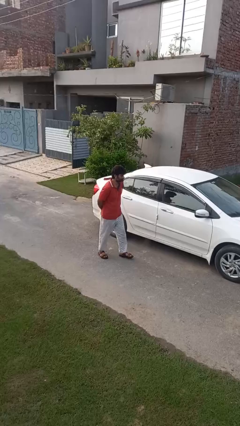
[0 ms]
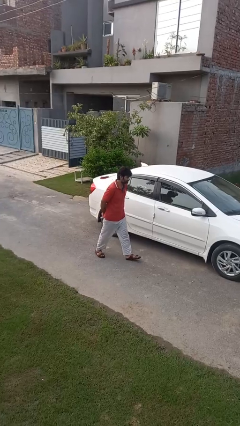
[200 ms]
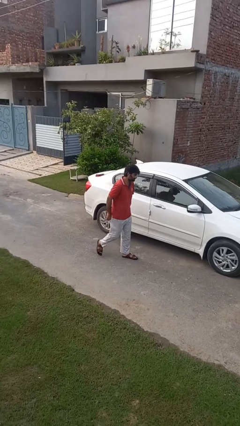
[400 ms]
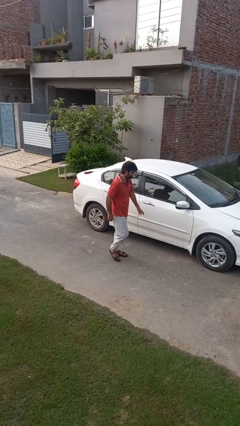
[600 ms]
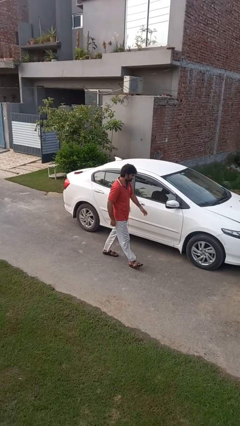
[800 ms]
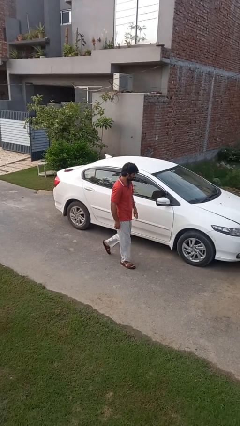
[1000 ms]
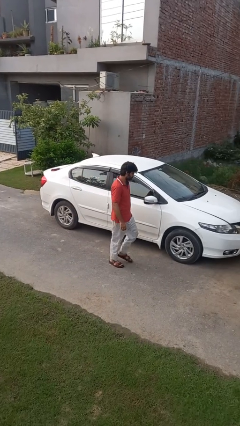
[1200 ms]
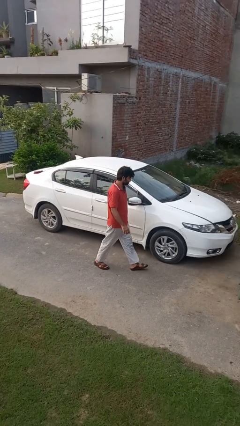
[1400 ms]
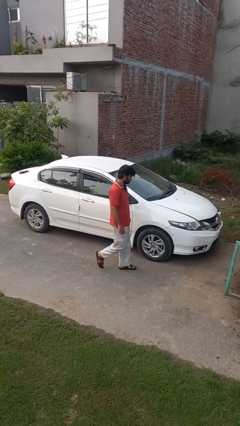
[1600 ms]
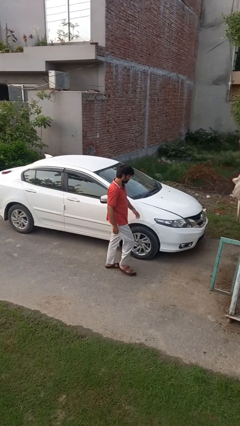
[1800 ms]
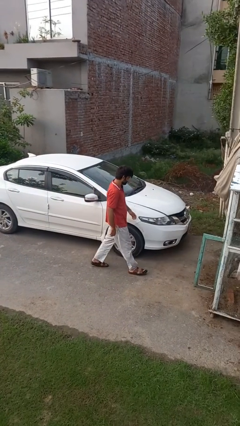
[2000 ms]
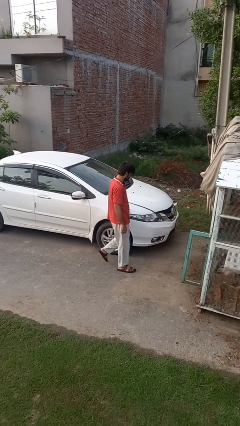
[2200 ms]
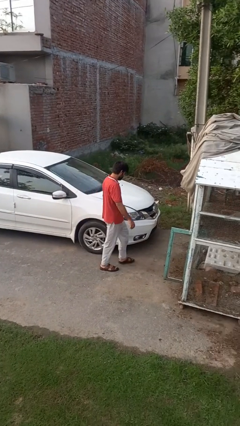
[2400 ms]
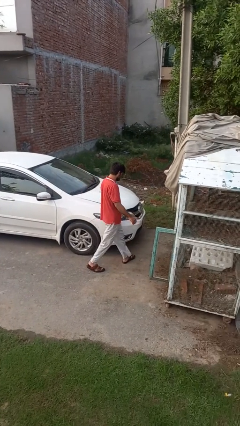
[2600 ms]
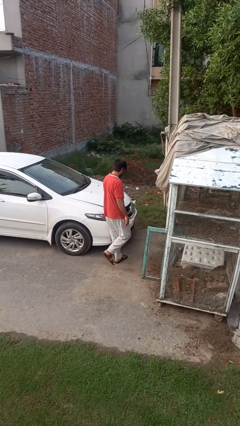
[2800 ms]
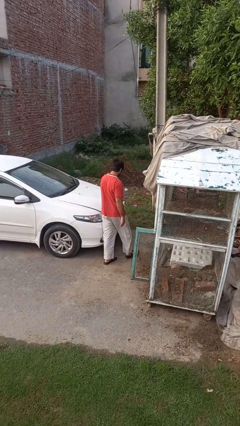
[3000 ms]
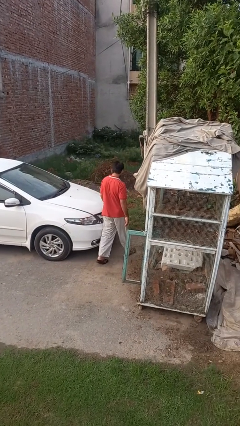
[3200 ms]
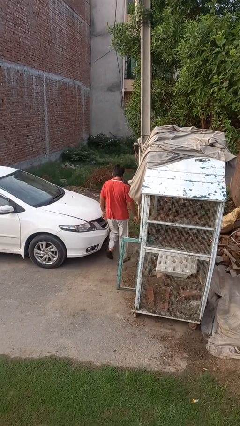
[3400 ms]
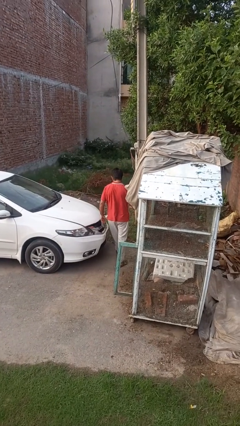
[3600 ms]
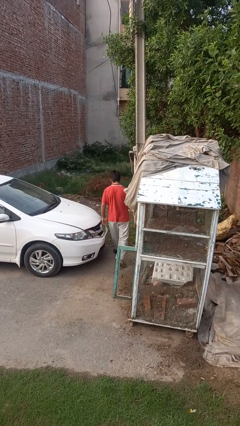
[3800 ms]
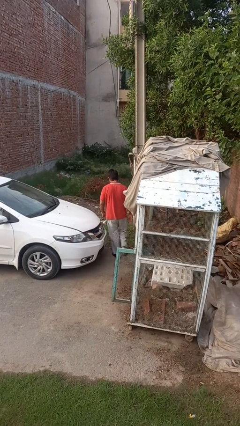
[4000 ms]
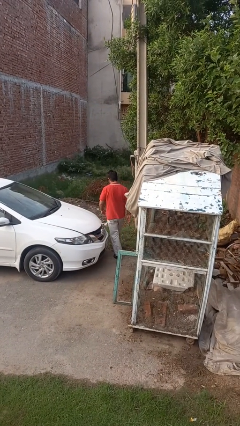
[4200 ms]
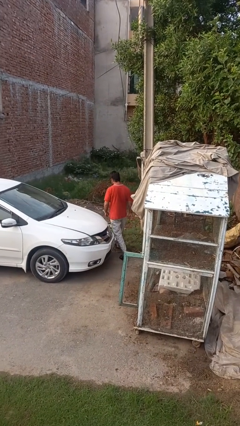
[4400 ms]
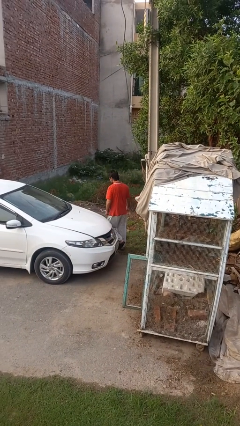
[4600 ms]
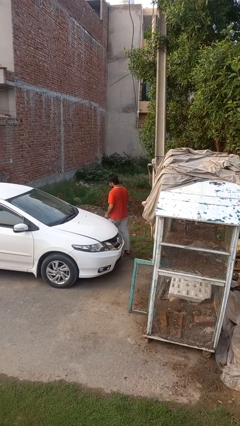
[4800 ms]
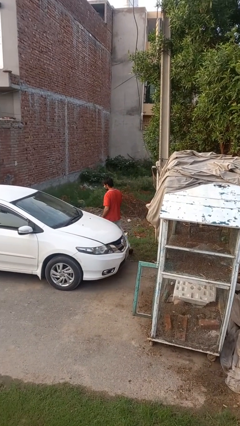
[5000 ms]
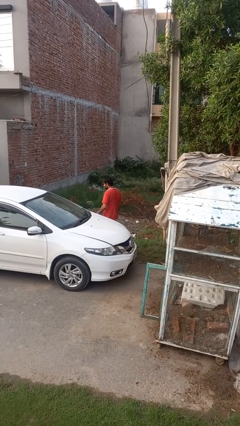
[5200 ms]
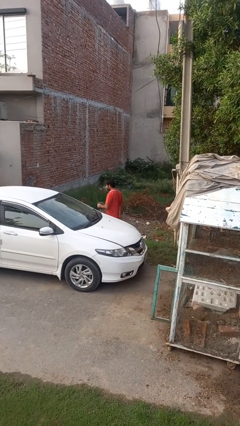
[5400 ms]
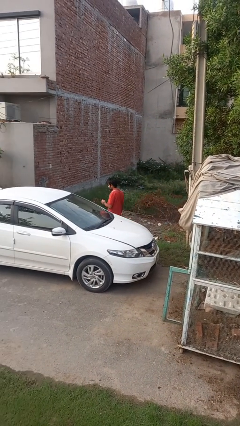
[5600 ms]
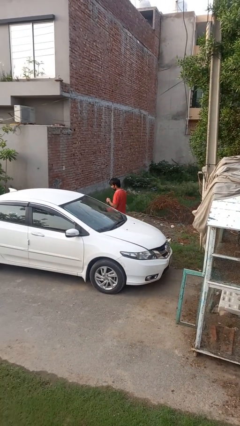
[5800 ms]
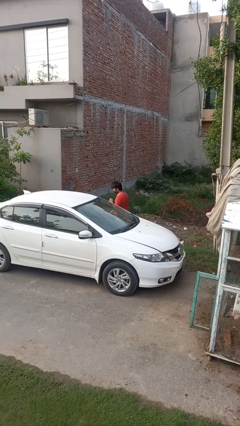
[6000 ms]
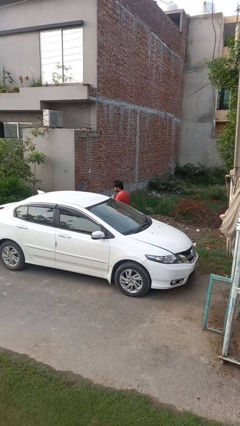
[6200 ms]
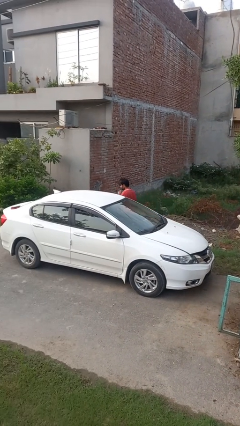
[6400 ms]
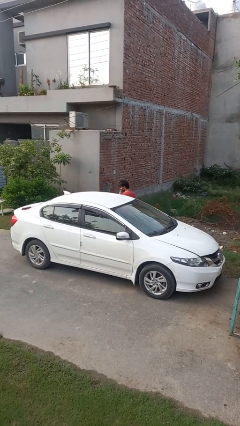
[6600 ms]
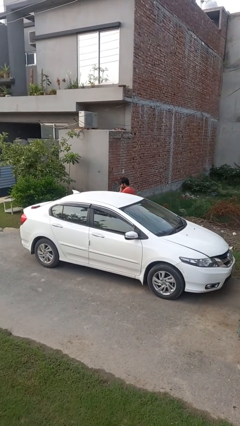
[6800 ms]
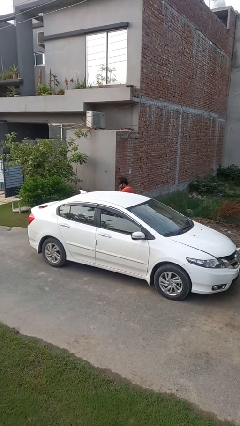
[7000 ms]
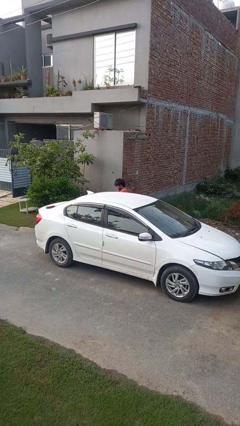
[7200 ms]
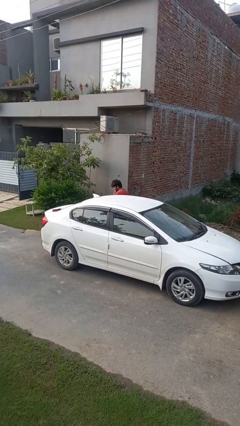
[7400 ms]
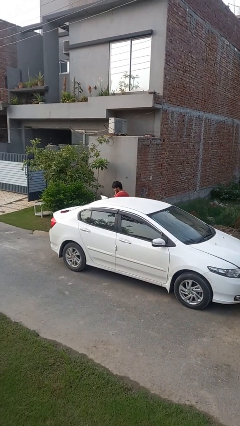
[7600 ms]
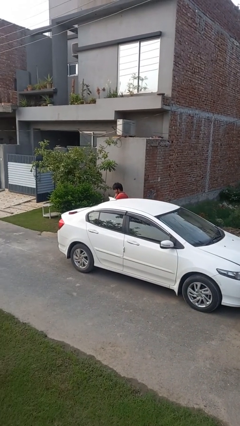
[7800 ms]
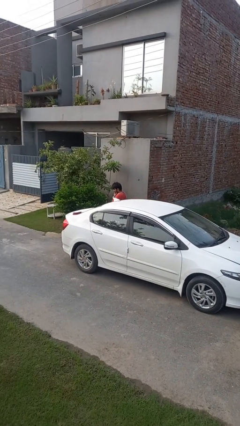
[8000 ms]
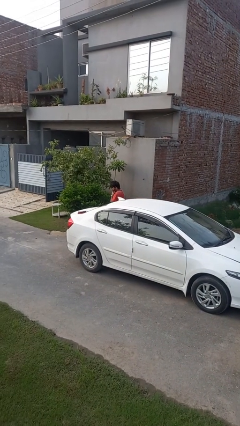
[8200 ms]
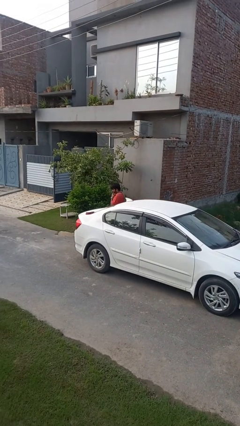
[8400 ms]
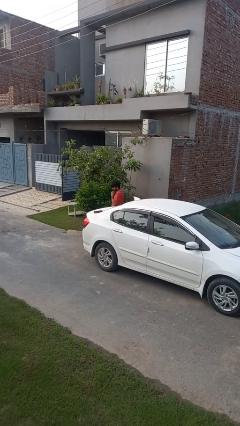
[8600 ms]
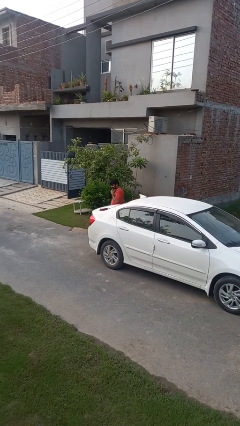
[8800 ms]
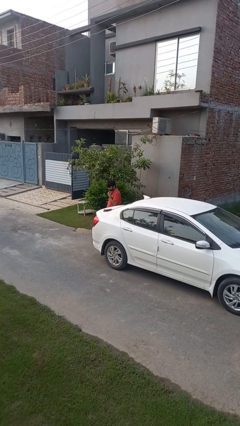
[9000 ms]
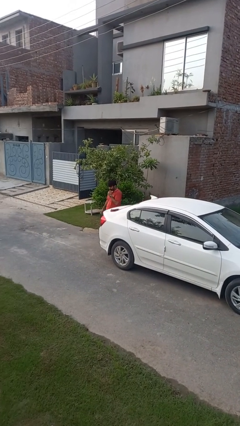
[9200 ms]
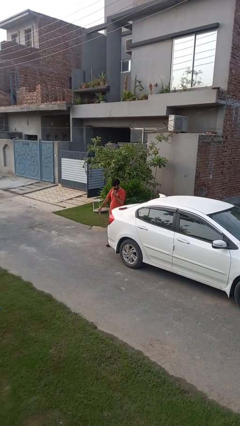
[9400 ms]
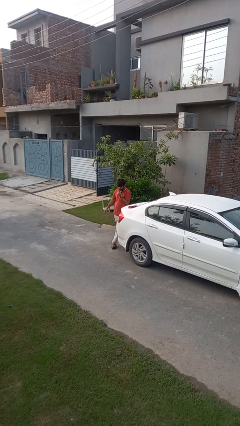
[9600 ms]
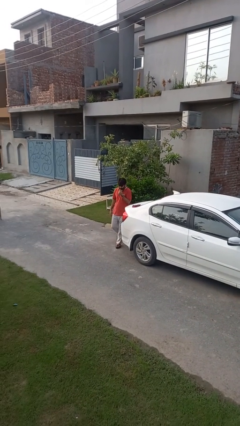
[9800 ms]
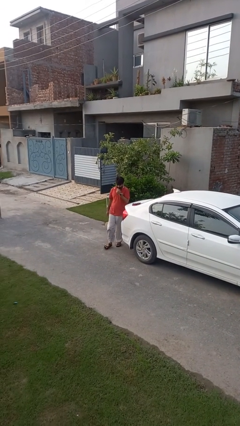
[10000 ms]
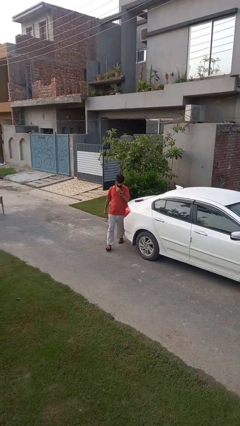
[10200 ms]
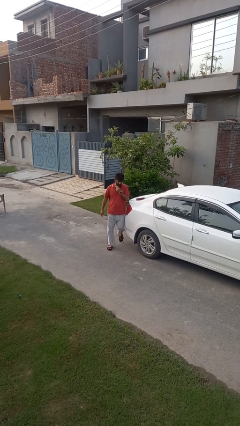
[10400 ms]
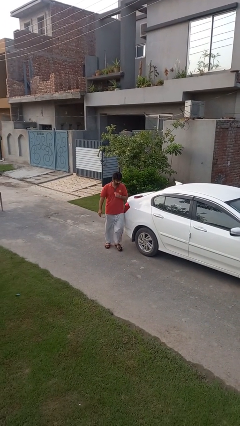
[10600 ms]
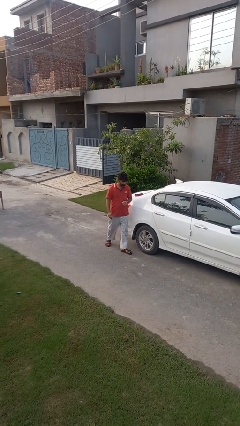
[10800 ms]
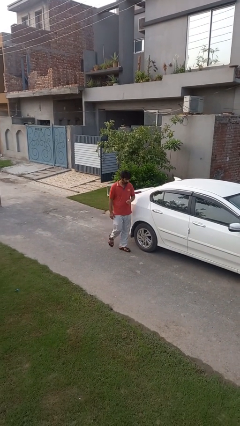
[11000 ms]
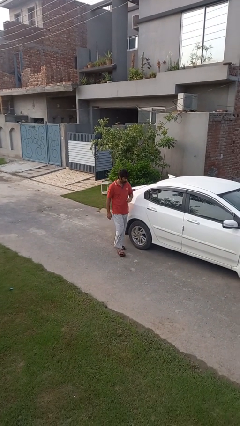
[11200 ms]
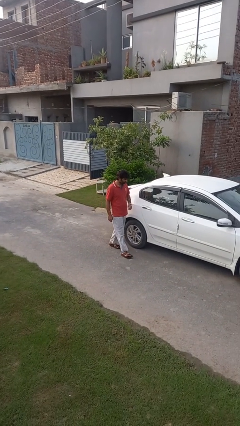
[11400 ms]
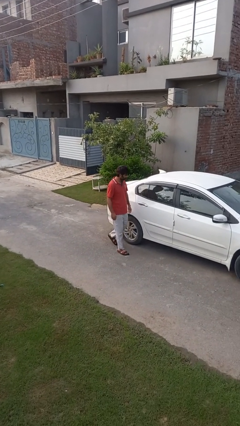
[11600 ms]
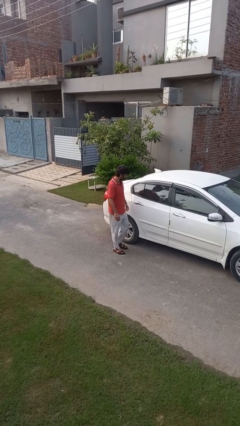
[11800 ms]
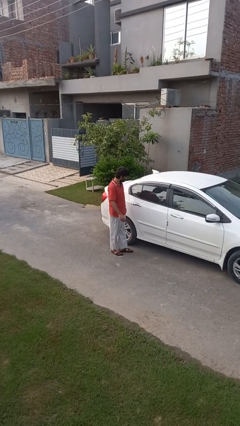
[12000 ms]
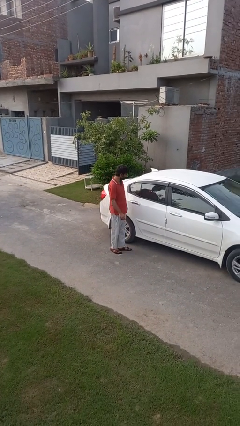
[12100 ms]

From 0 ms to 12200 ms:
person walks around car

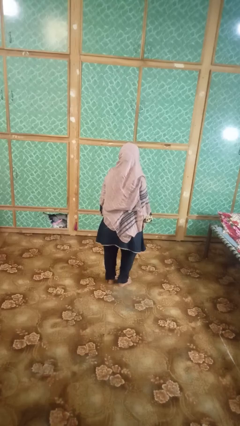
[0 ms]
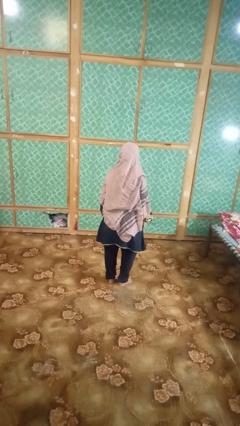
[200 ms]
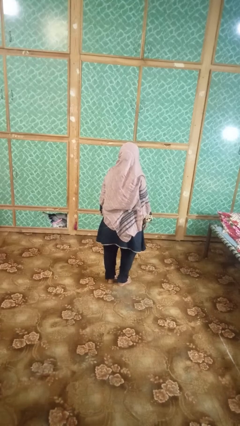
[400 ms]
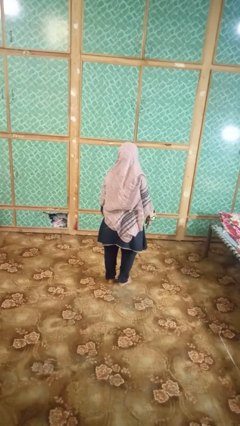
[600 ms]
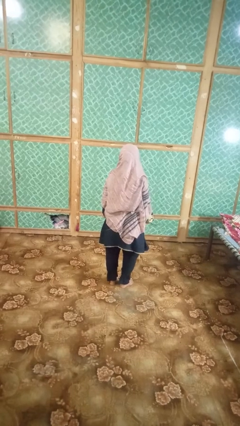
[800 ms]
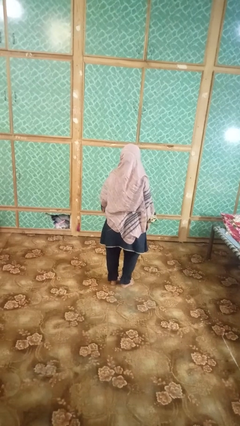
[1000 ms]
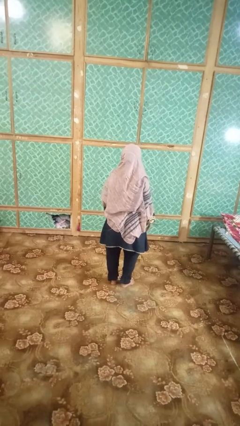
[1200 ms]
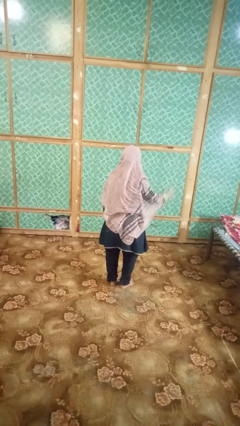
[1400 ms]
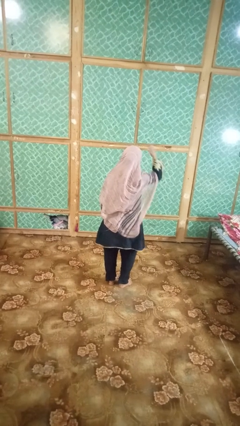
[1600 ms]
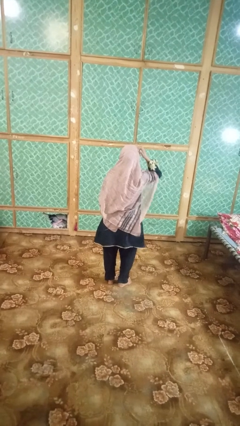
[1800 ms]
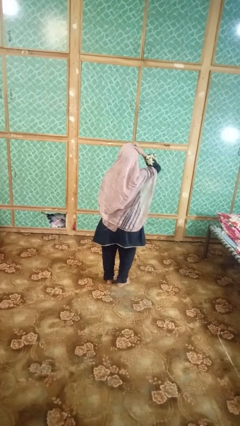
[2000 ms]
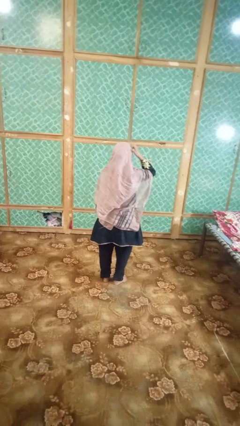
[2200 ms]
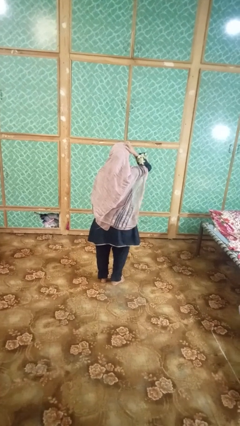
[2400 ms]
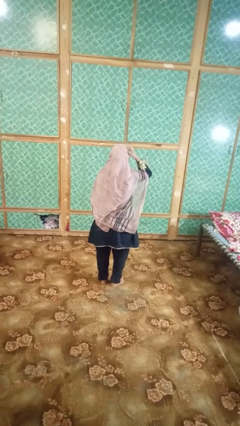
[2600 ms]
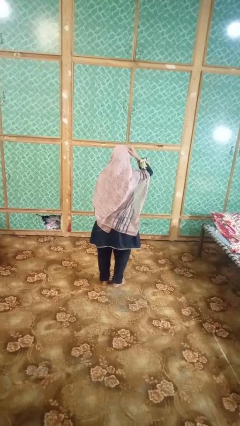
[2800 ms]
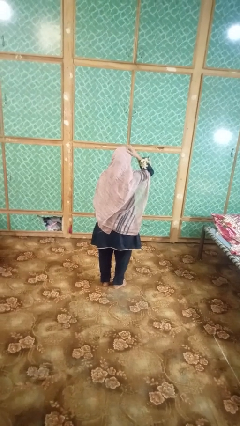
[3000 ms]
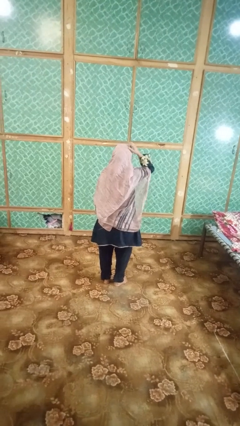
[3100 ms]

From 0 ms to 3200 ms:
person strokes hair

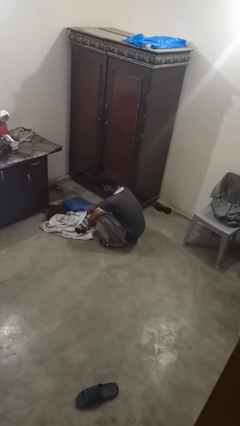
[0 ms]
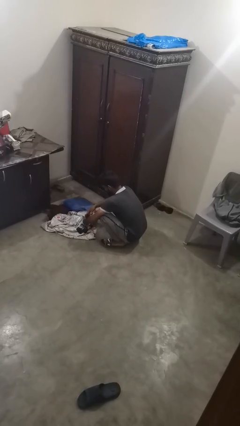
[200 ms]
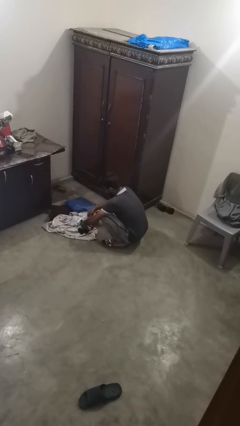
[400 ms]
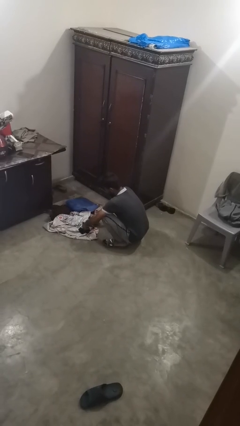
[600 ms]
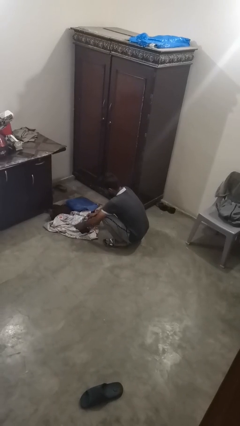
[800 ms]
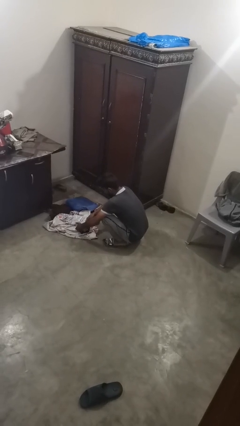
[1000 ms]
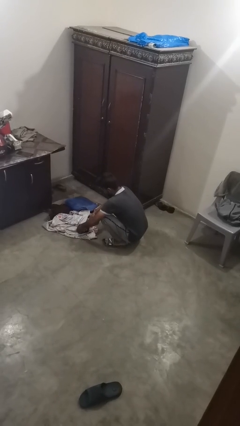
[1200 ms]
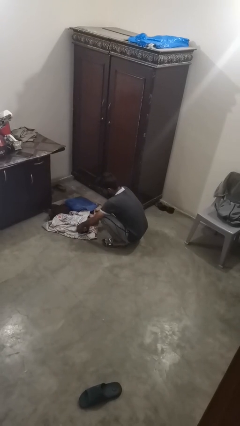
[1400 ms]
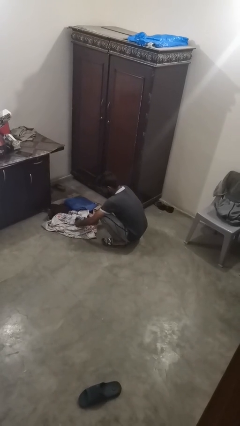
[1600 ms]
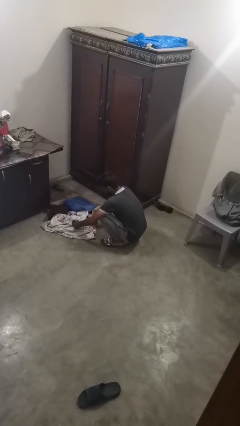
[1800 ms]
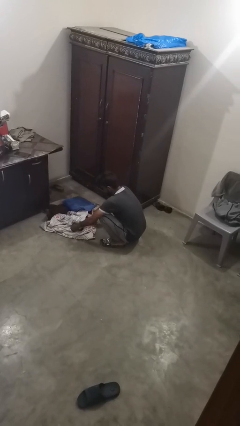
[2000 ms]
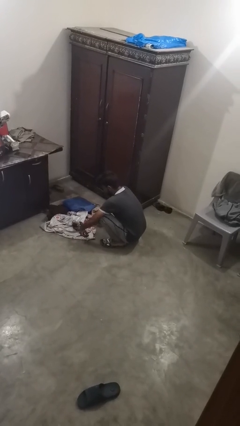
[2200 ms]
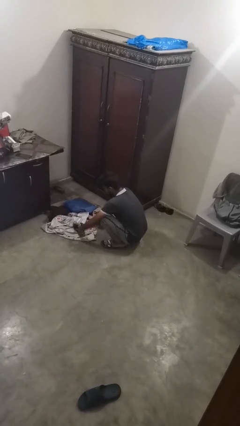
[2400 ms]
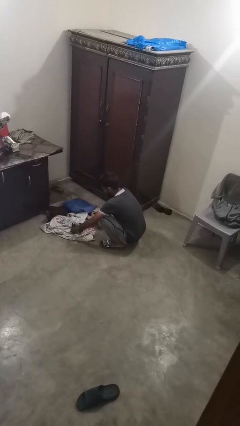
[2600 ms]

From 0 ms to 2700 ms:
person folds socks

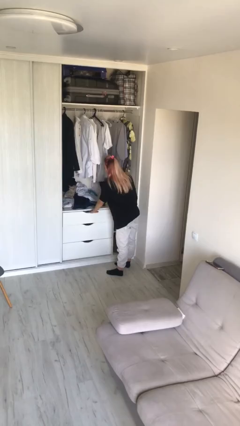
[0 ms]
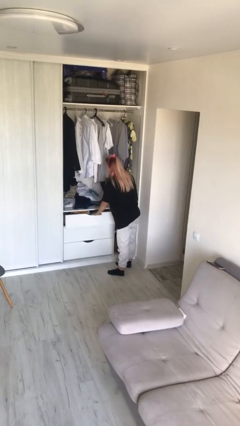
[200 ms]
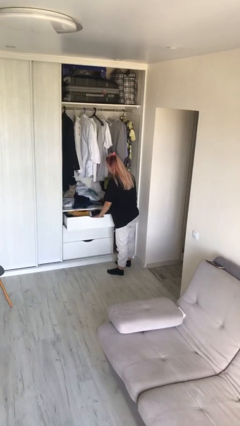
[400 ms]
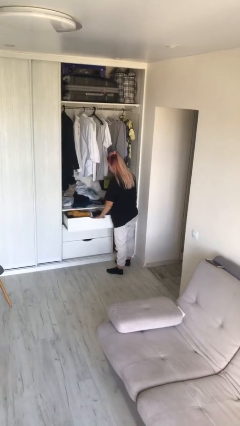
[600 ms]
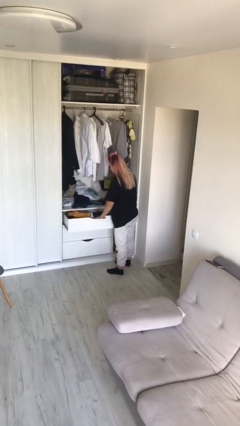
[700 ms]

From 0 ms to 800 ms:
person opens dresser drawer
